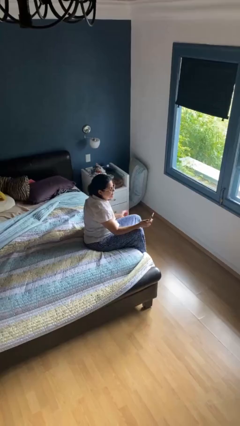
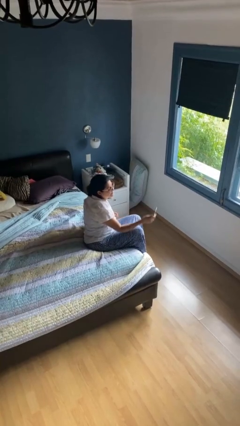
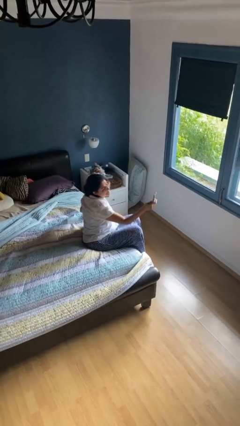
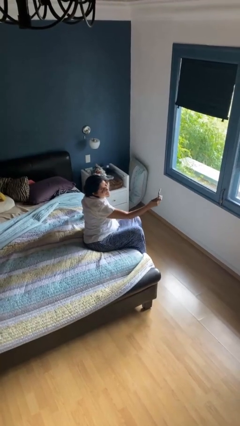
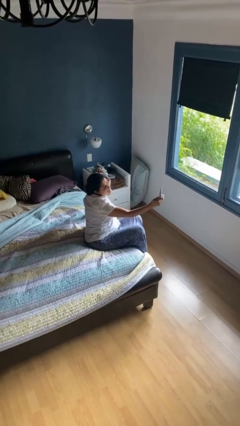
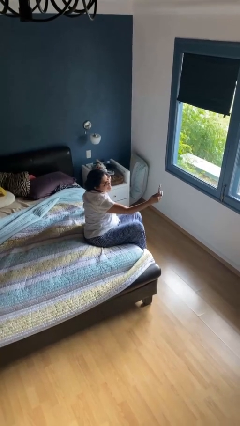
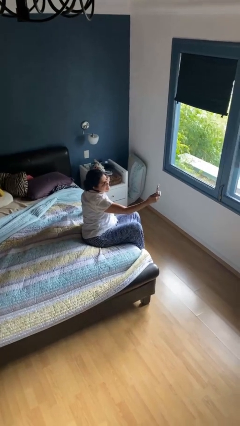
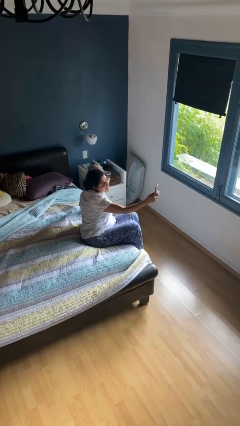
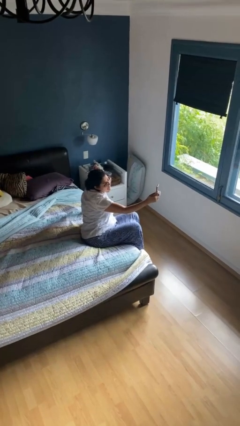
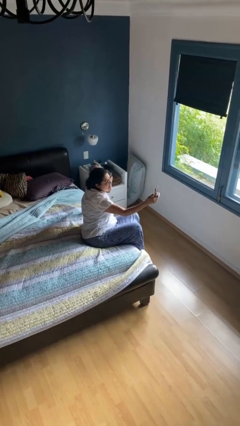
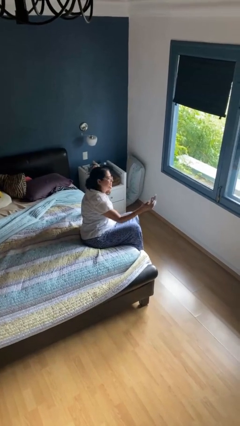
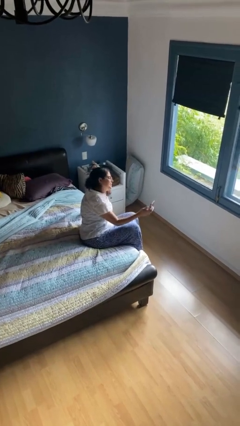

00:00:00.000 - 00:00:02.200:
person takes selfie

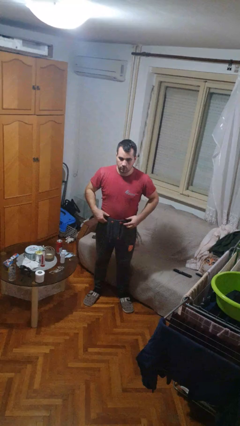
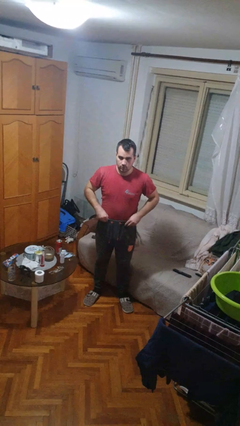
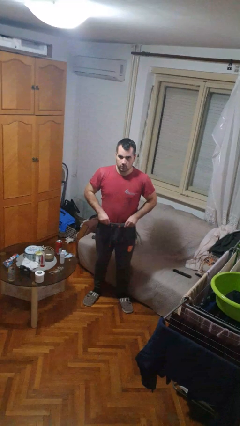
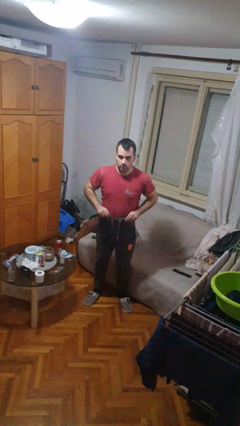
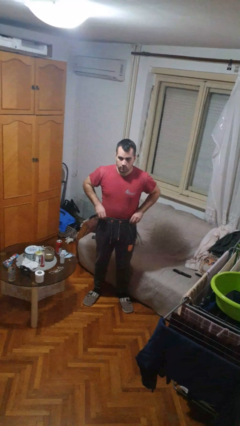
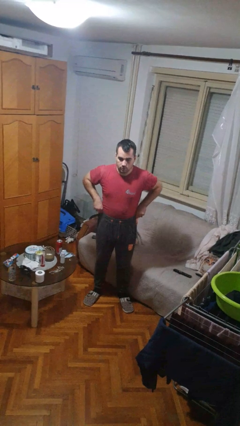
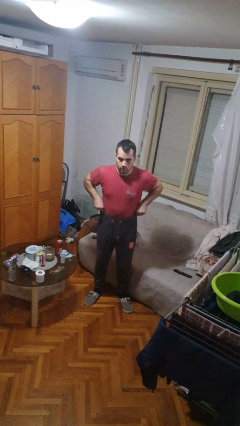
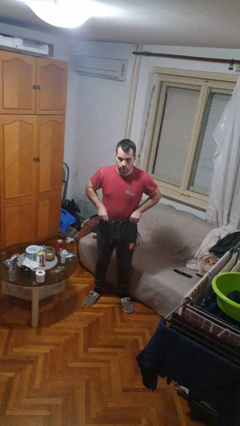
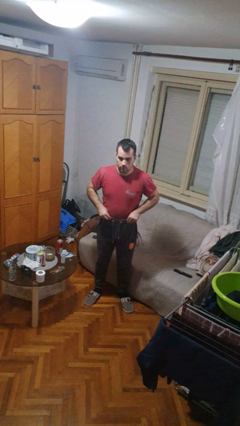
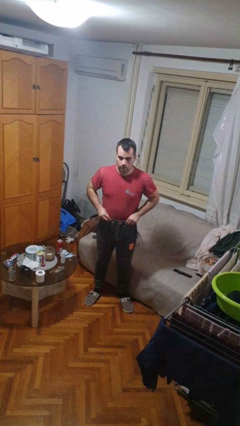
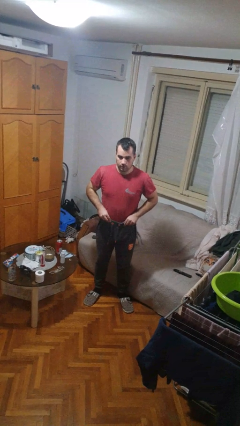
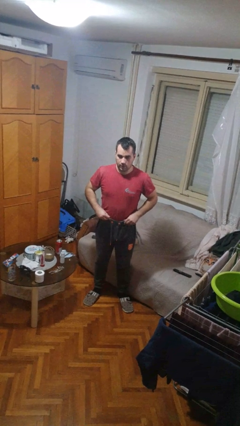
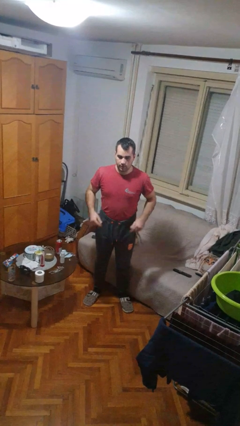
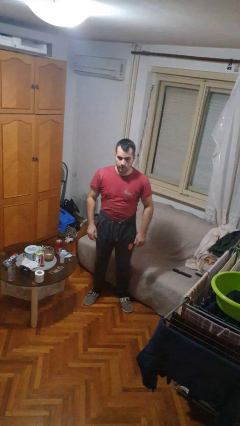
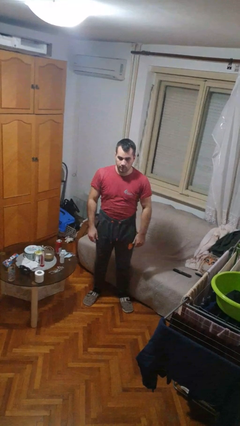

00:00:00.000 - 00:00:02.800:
person hikes up pants

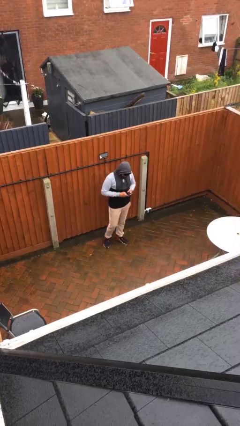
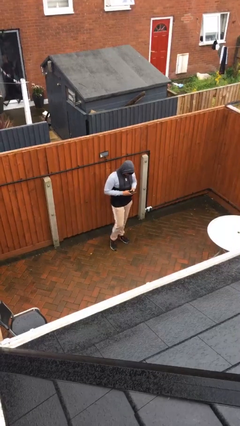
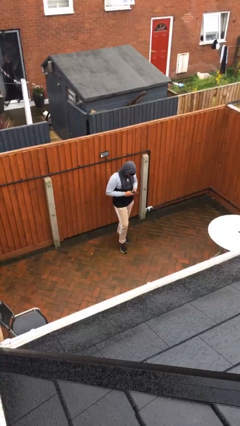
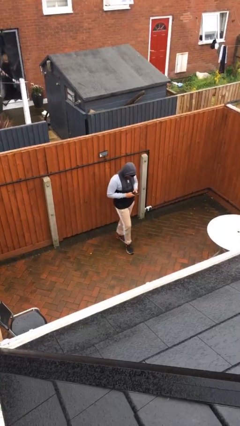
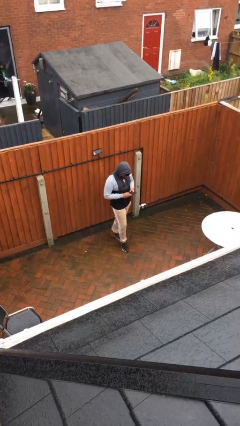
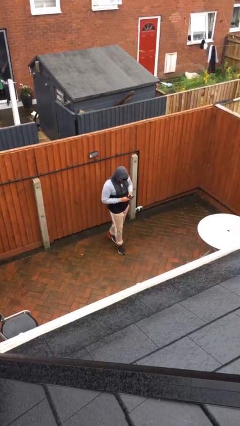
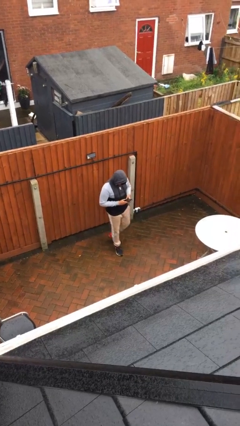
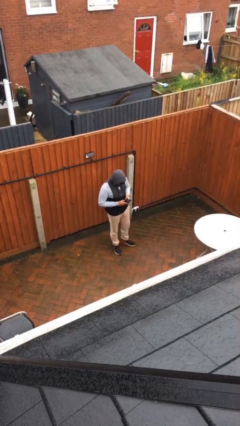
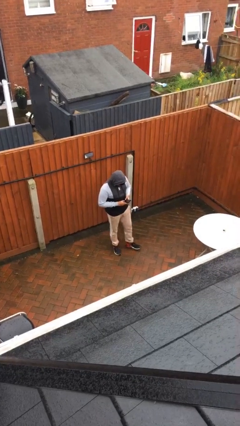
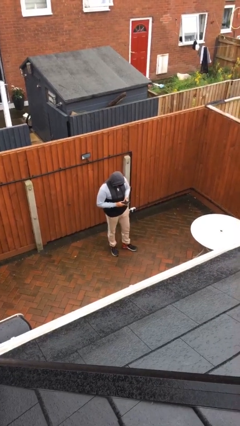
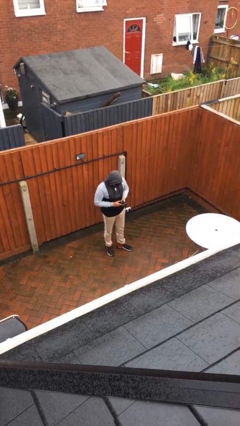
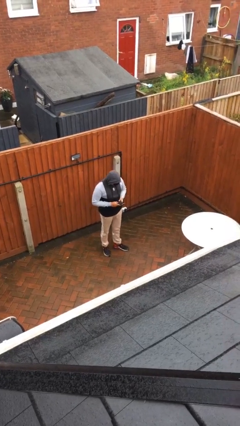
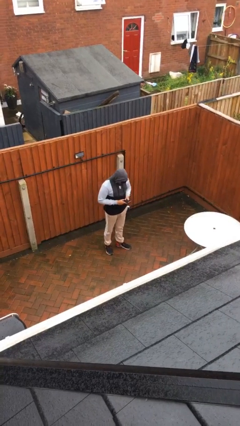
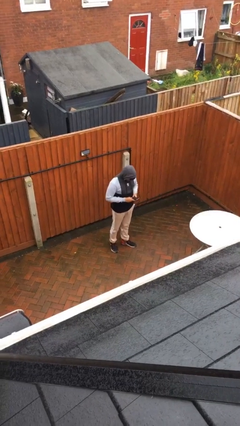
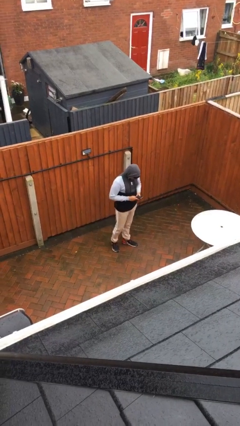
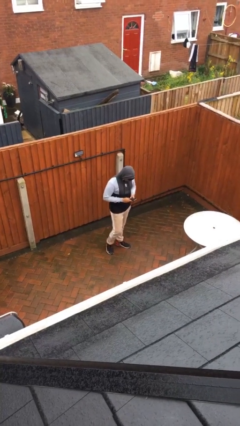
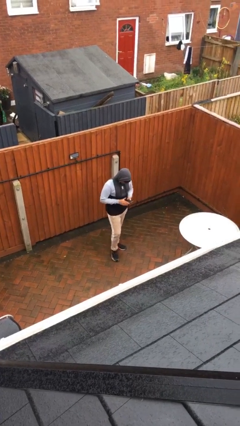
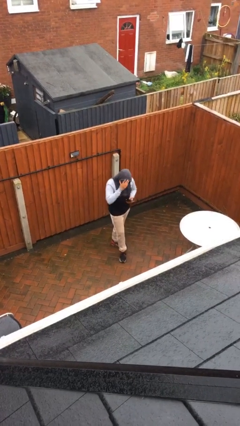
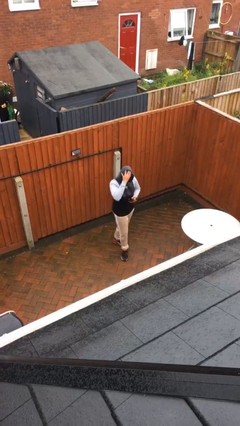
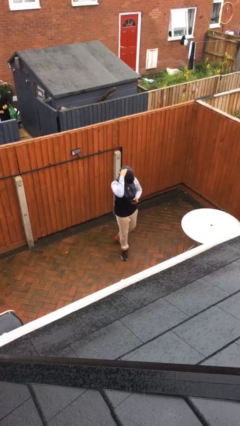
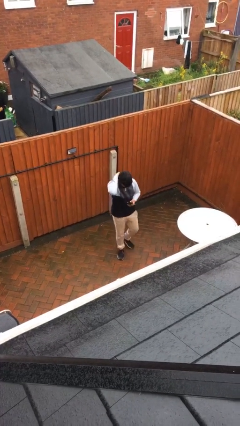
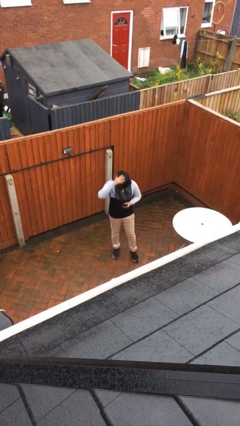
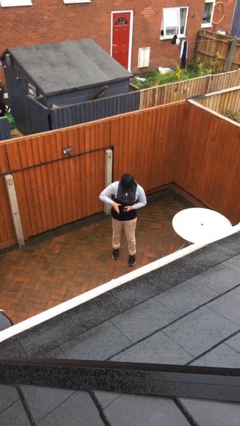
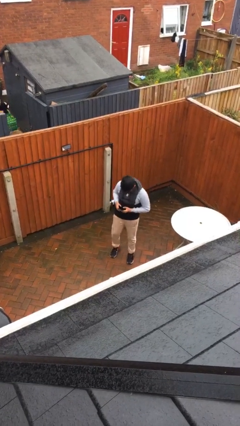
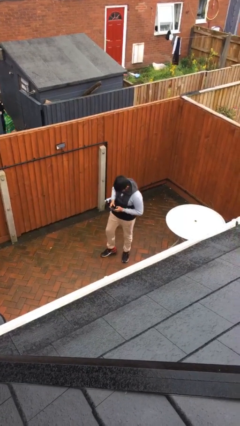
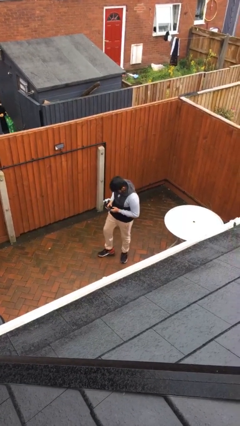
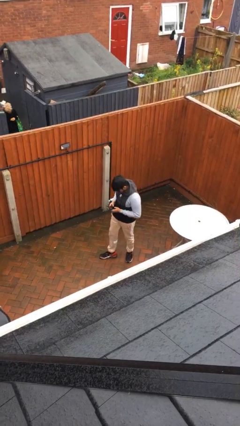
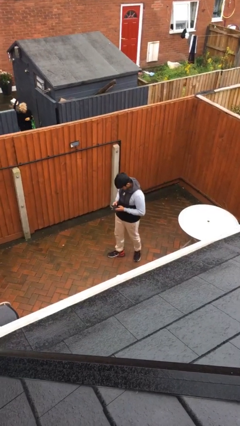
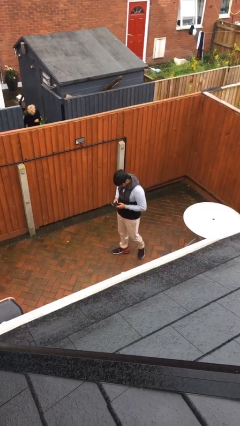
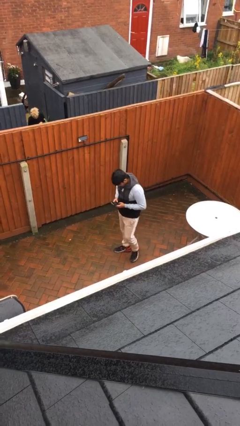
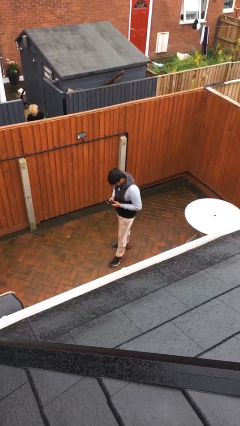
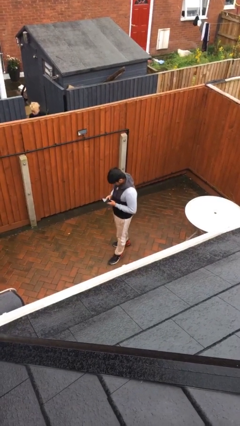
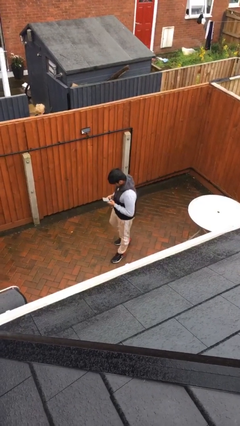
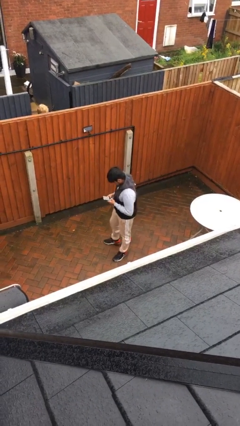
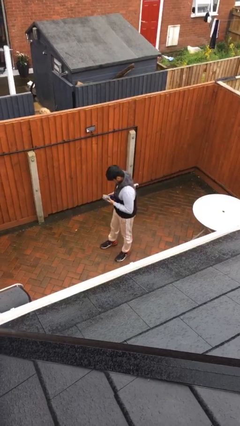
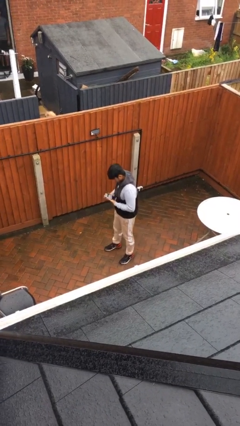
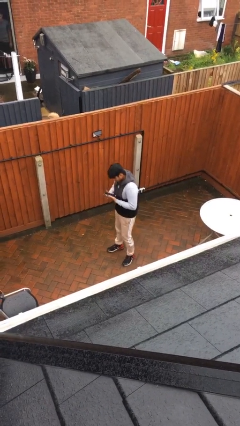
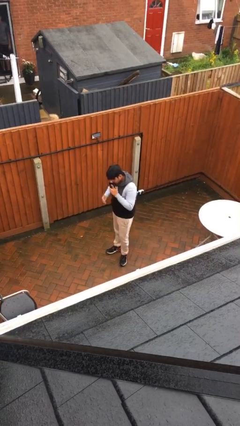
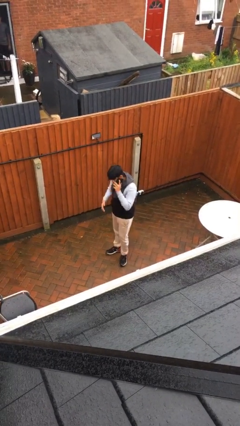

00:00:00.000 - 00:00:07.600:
person texts on phone

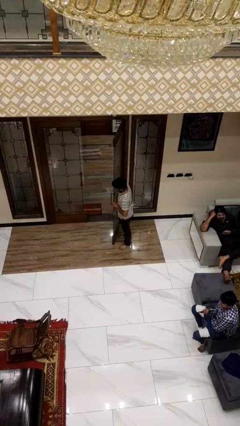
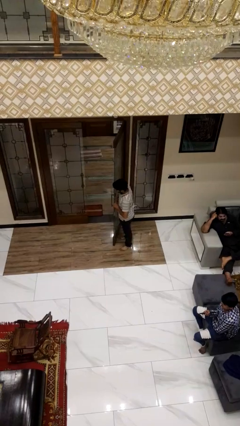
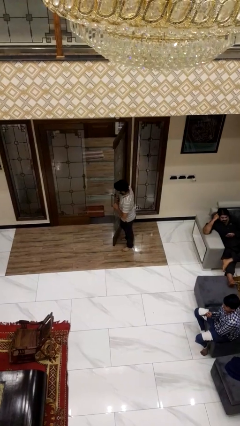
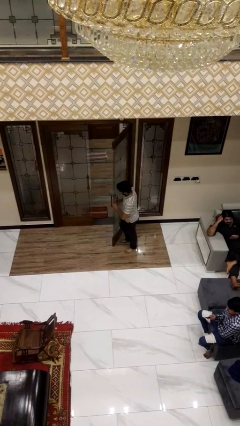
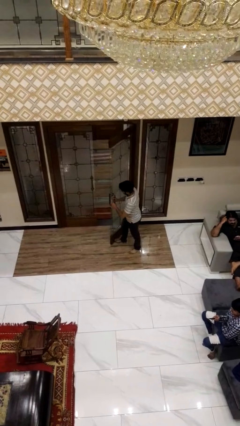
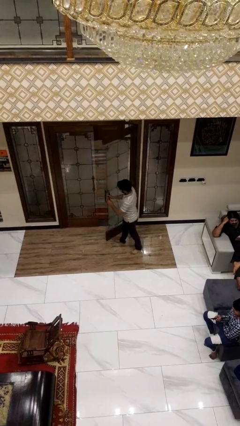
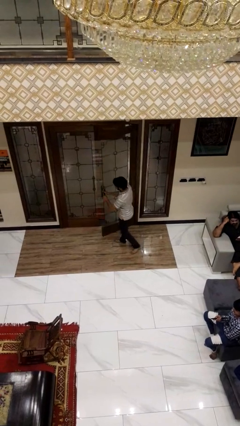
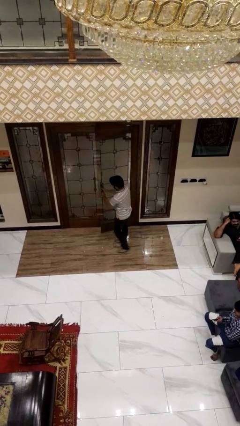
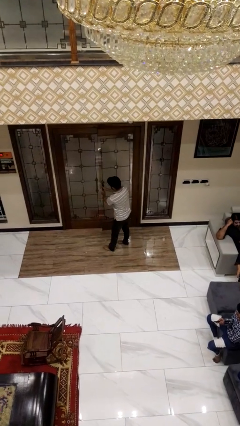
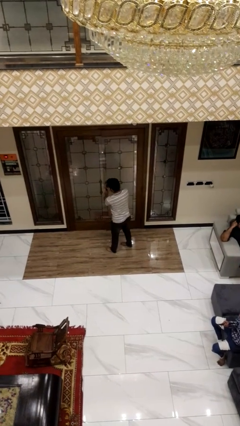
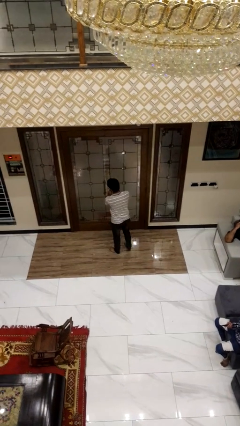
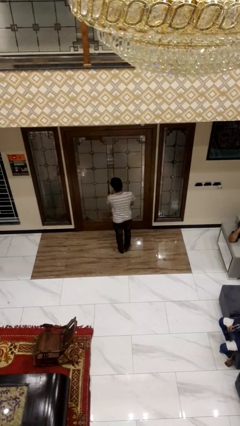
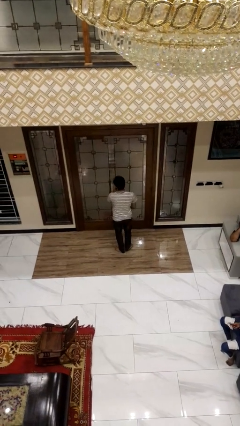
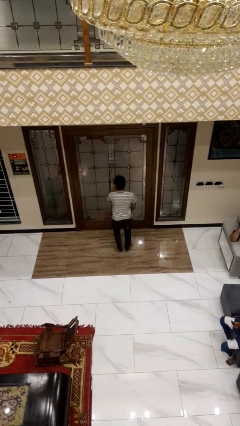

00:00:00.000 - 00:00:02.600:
person closes facility door

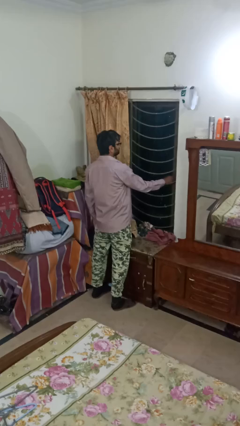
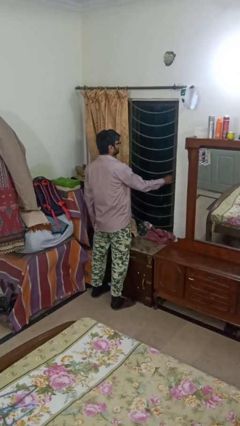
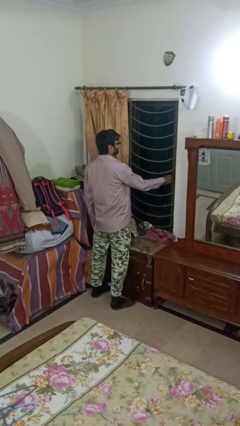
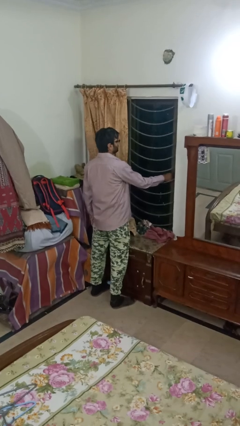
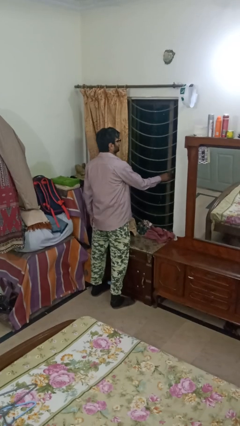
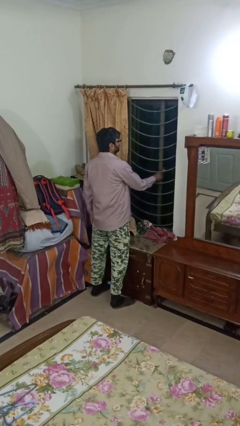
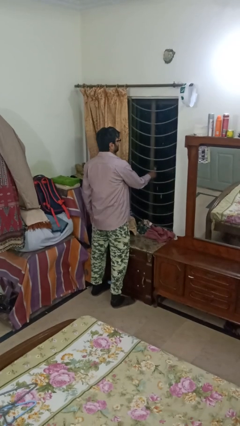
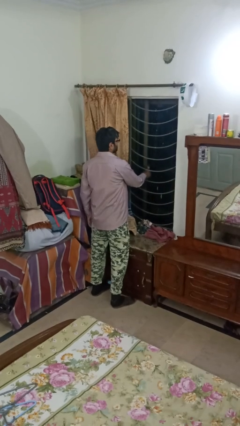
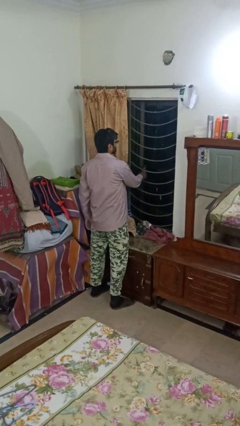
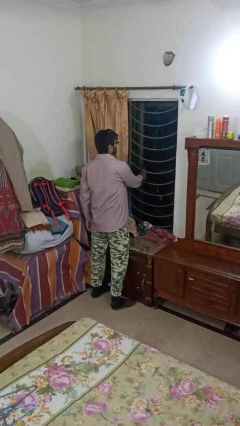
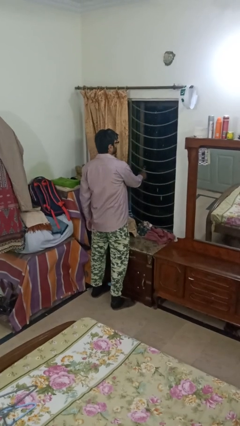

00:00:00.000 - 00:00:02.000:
person opens home window

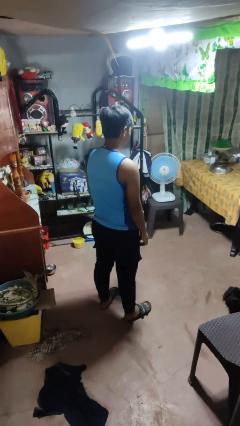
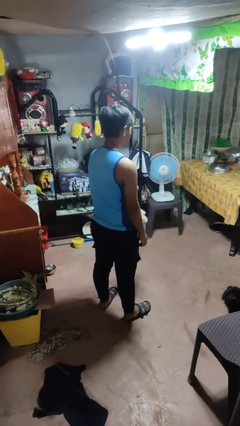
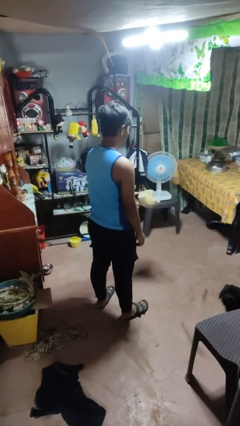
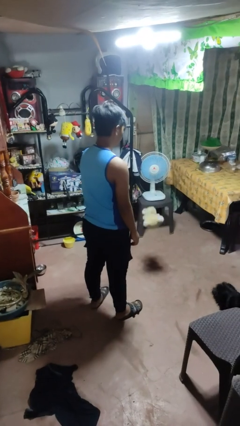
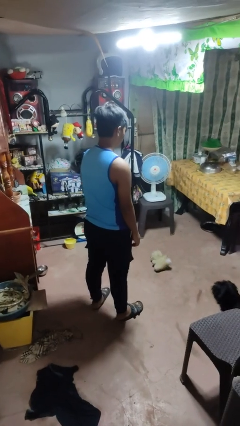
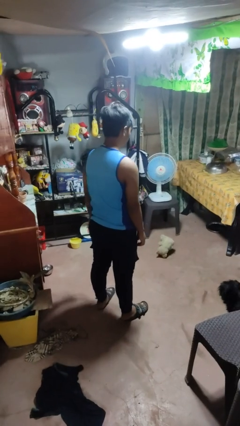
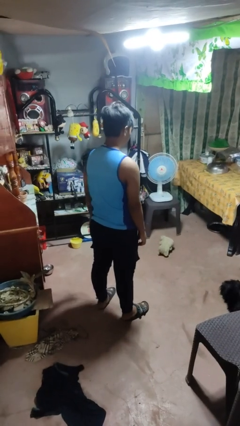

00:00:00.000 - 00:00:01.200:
person throws object to ground
